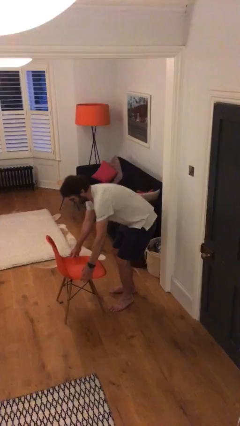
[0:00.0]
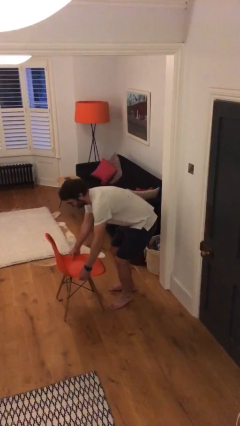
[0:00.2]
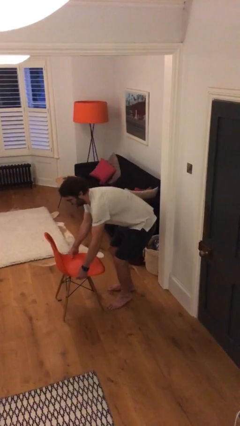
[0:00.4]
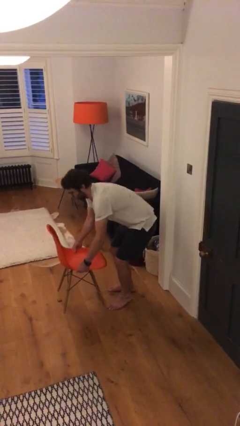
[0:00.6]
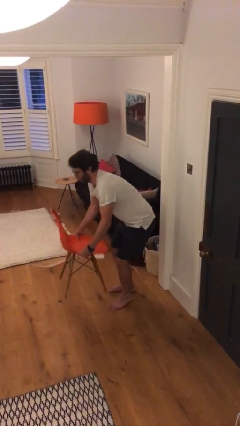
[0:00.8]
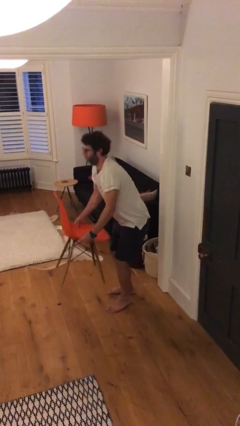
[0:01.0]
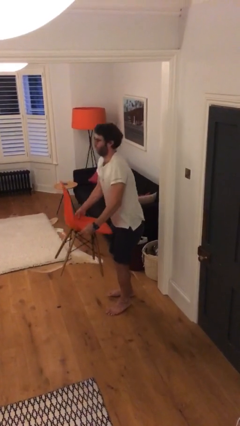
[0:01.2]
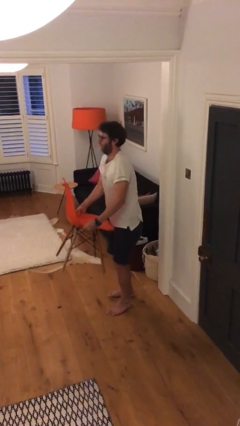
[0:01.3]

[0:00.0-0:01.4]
person picks up object from floor

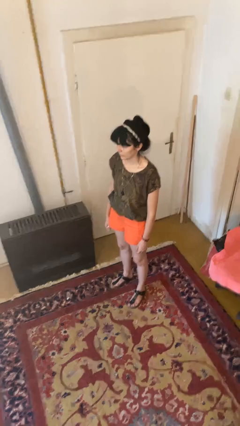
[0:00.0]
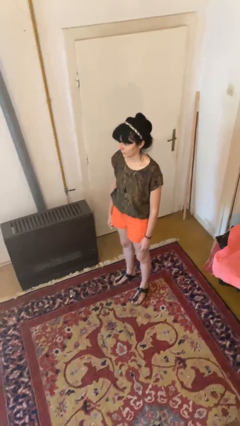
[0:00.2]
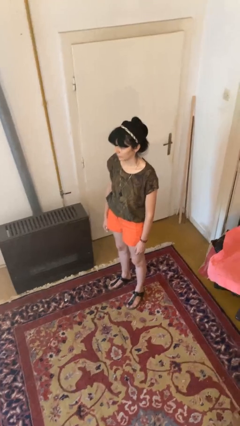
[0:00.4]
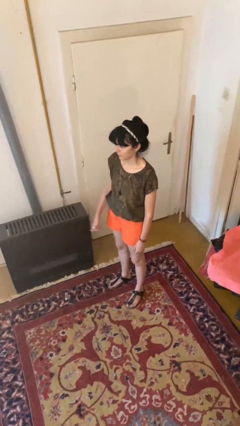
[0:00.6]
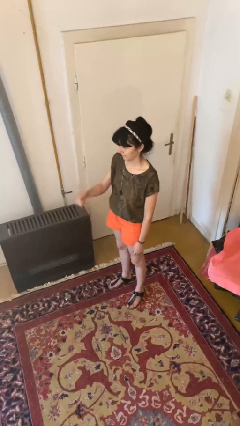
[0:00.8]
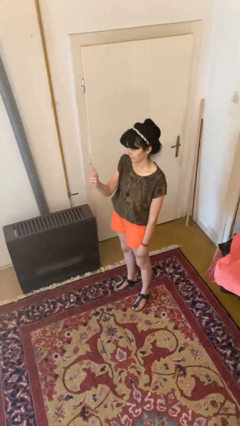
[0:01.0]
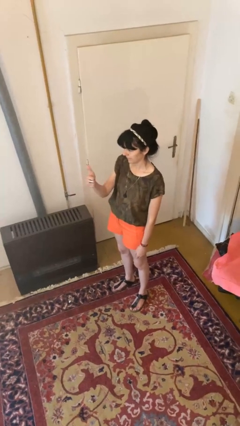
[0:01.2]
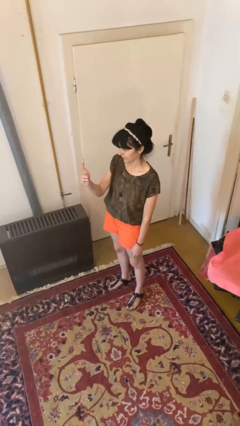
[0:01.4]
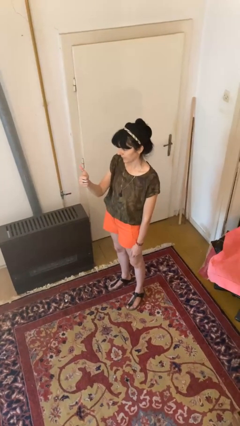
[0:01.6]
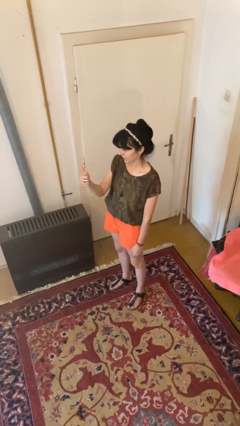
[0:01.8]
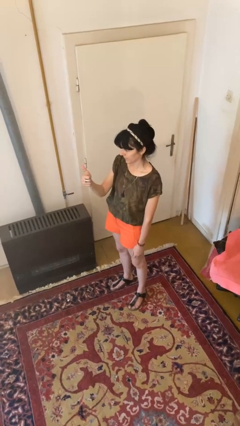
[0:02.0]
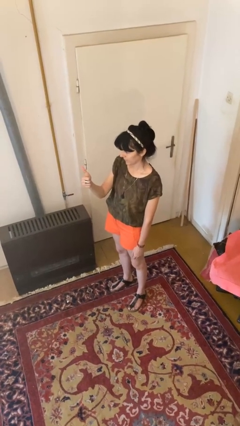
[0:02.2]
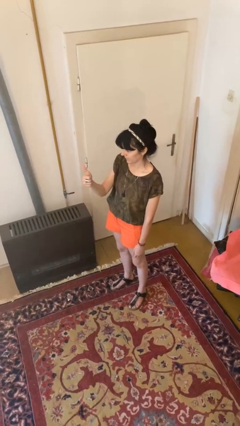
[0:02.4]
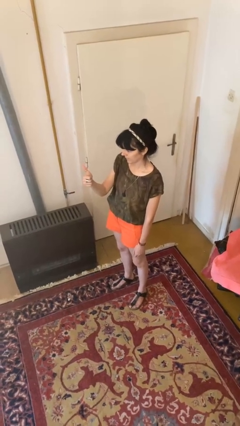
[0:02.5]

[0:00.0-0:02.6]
person gestures thumbs up

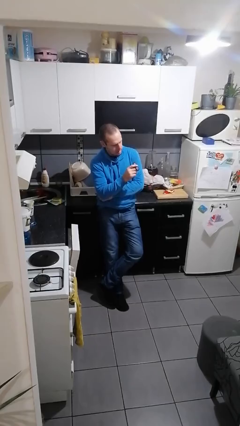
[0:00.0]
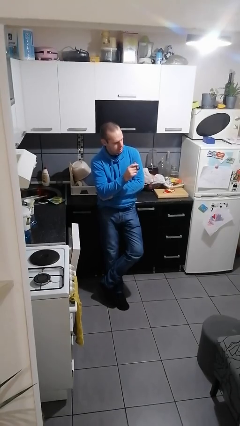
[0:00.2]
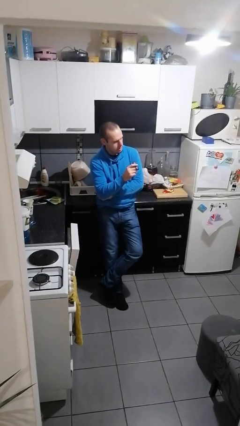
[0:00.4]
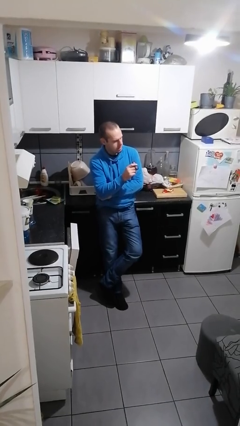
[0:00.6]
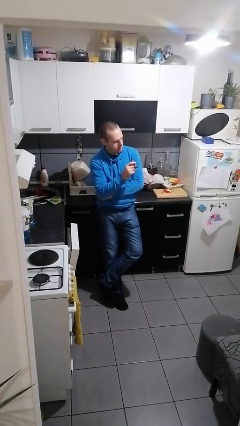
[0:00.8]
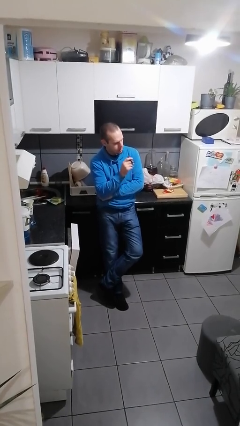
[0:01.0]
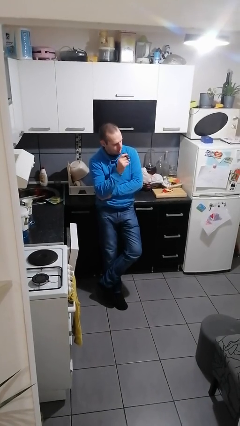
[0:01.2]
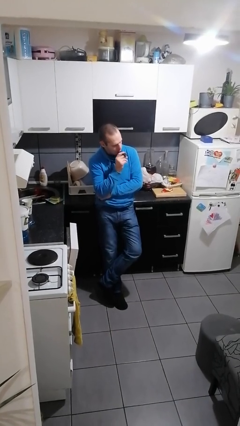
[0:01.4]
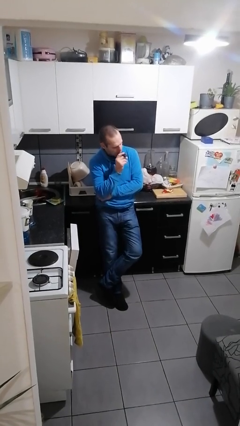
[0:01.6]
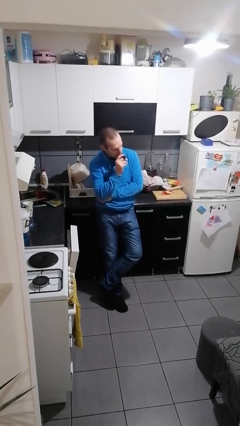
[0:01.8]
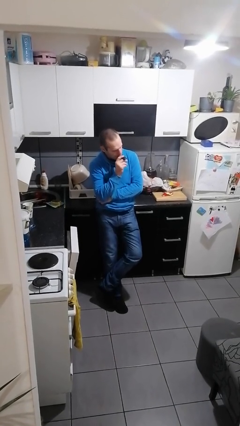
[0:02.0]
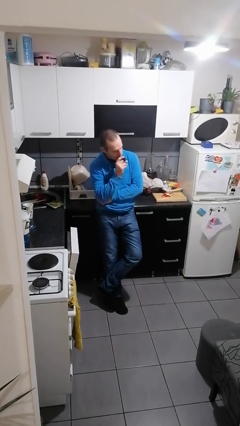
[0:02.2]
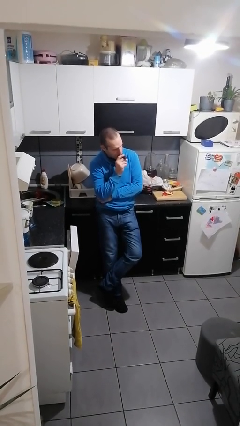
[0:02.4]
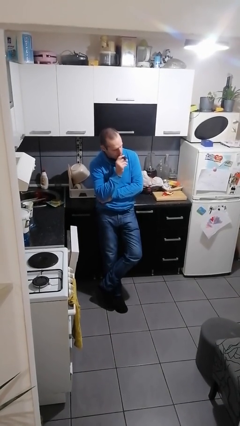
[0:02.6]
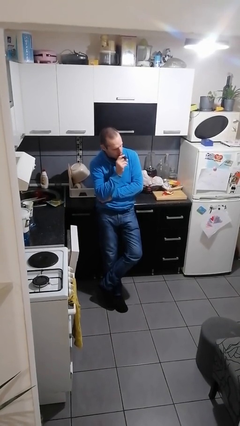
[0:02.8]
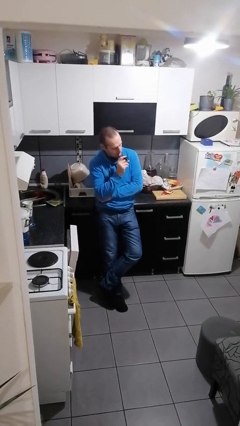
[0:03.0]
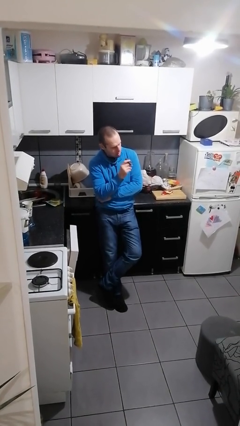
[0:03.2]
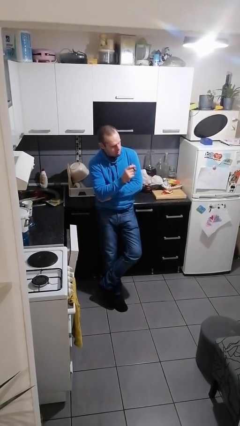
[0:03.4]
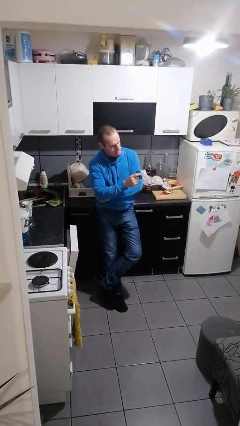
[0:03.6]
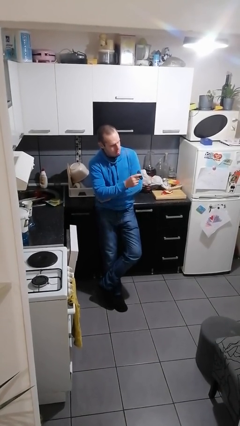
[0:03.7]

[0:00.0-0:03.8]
person vapes

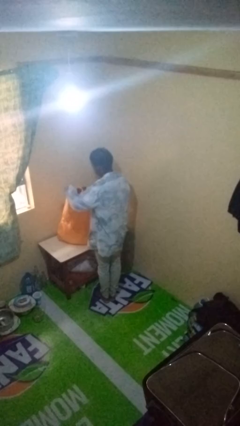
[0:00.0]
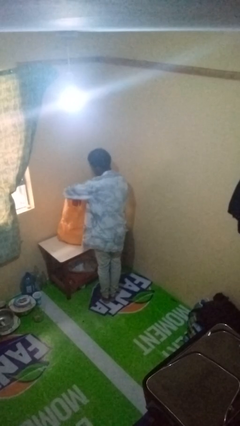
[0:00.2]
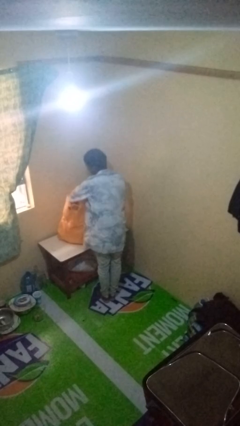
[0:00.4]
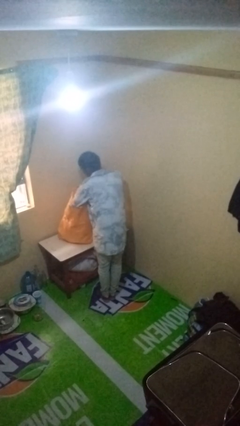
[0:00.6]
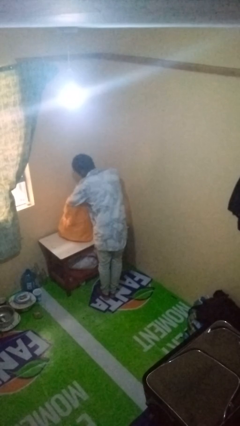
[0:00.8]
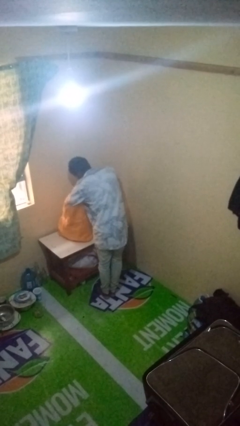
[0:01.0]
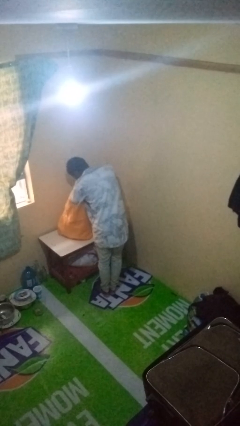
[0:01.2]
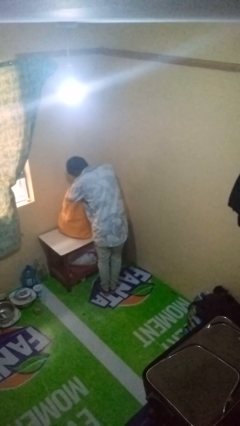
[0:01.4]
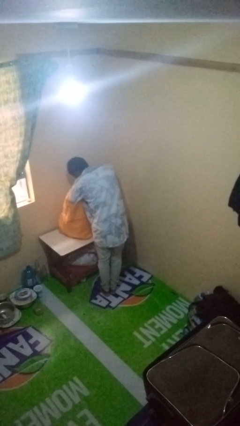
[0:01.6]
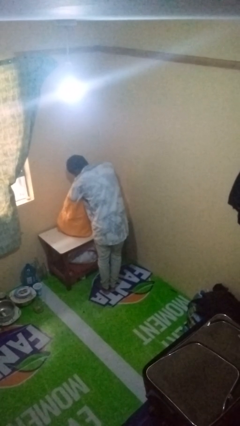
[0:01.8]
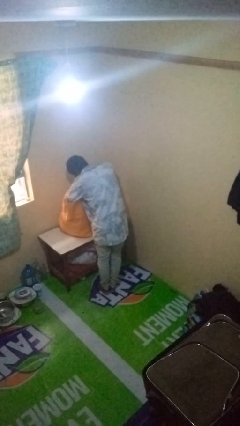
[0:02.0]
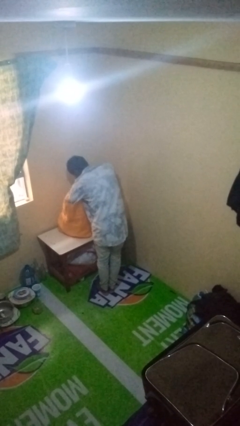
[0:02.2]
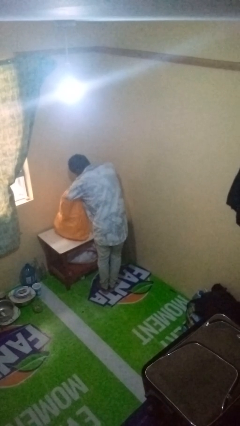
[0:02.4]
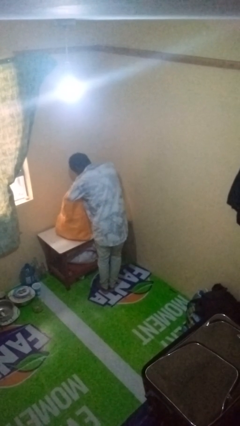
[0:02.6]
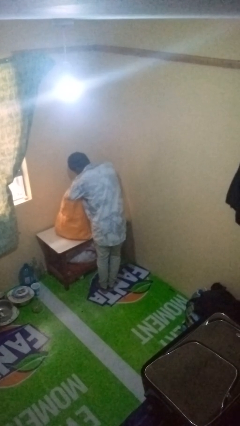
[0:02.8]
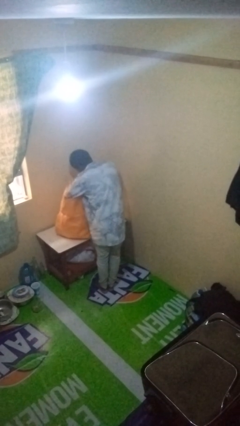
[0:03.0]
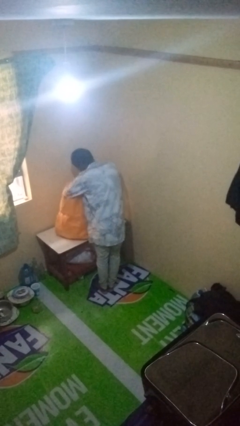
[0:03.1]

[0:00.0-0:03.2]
person searches in bag

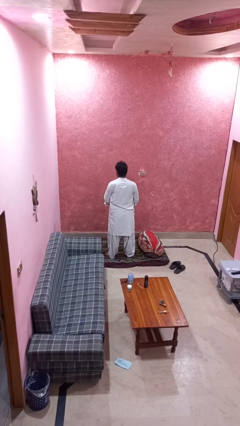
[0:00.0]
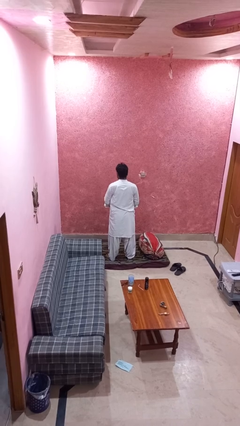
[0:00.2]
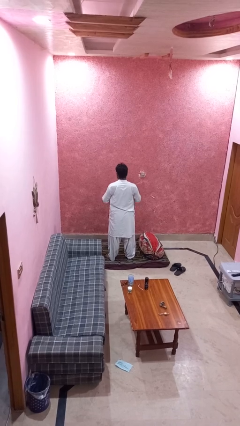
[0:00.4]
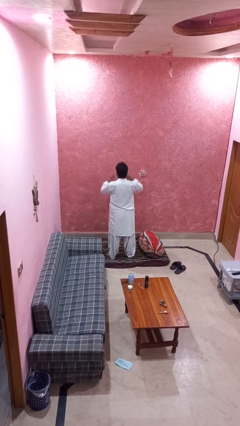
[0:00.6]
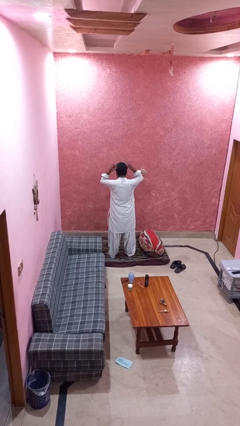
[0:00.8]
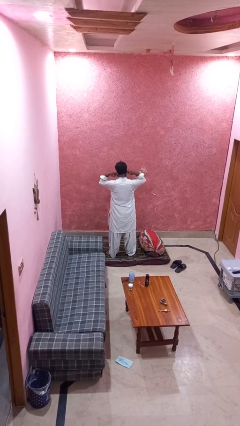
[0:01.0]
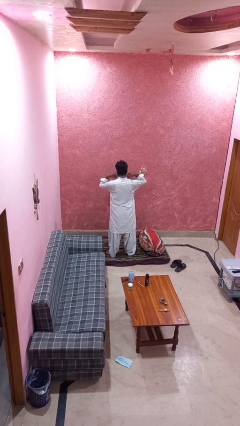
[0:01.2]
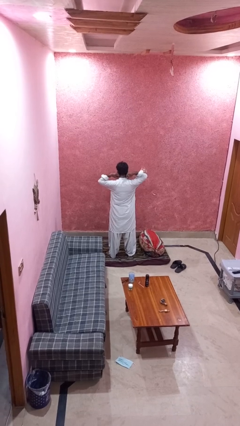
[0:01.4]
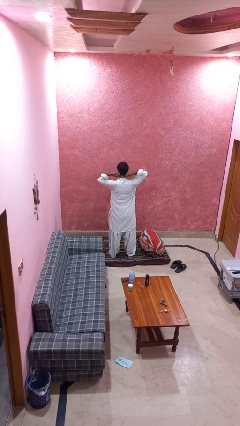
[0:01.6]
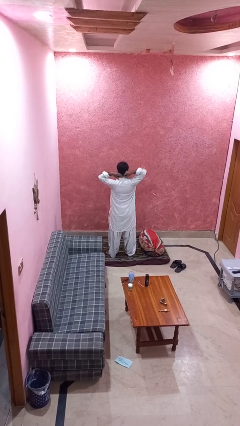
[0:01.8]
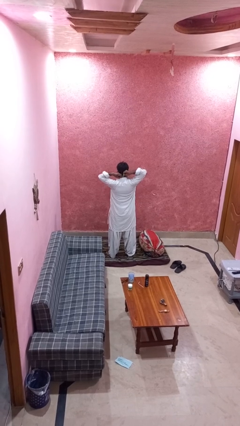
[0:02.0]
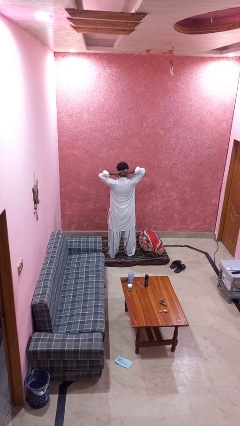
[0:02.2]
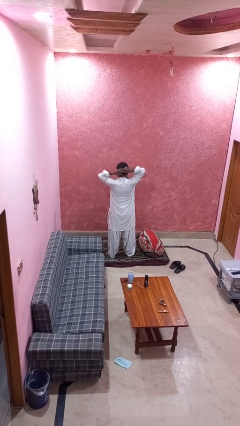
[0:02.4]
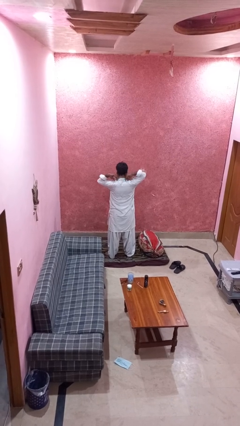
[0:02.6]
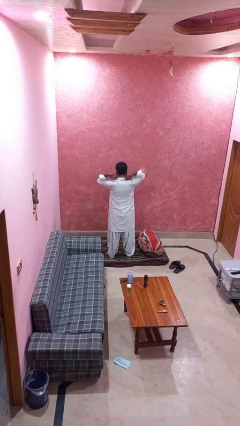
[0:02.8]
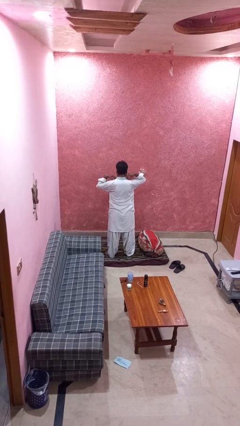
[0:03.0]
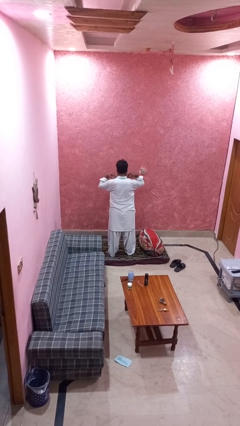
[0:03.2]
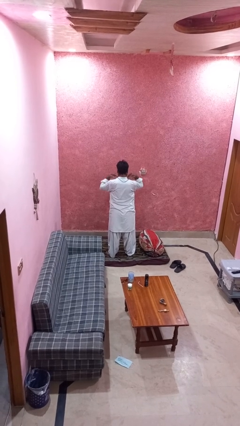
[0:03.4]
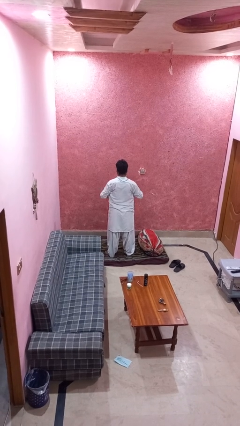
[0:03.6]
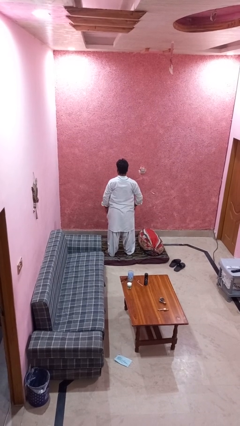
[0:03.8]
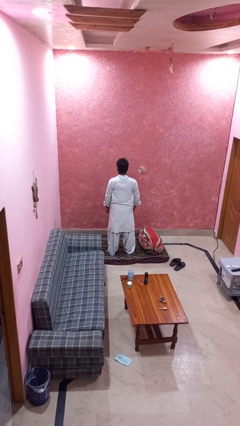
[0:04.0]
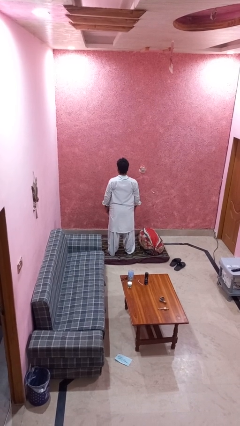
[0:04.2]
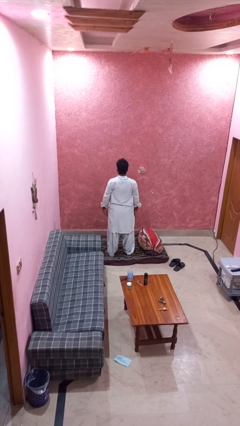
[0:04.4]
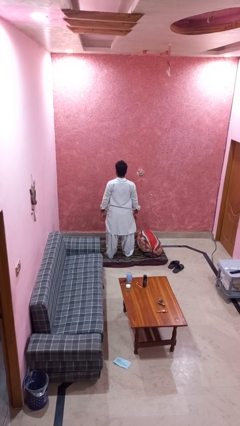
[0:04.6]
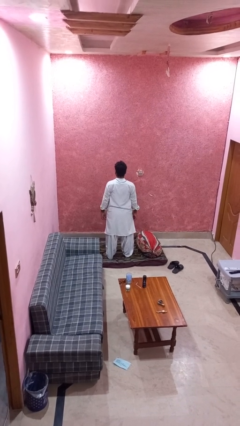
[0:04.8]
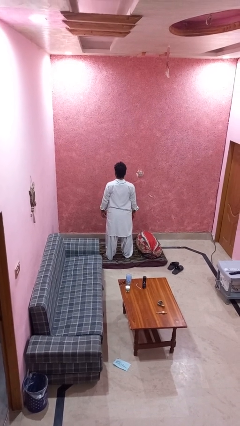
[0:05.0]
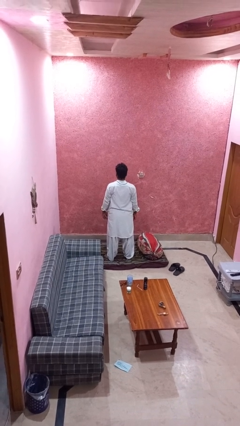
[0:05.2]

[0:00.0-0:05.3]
person puts on necklace

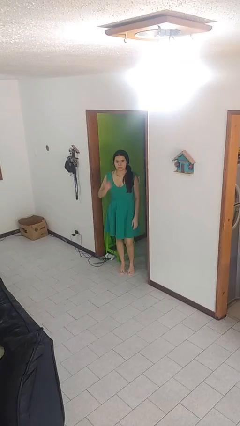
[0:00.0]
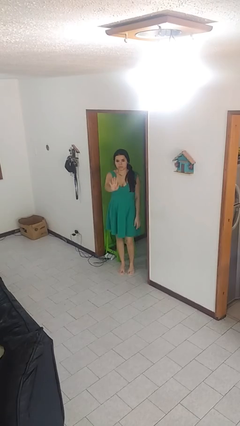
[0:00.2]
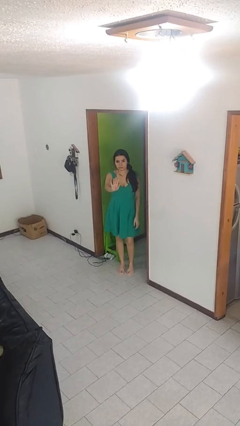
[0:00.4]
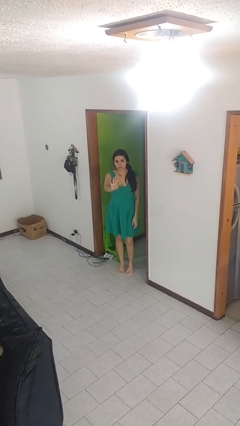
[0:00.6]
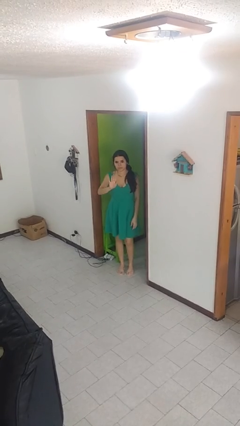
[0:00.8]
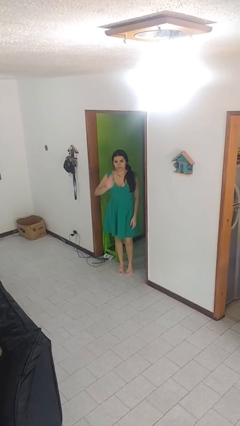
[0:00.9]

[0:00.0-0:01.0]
person gestures stop

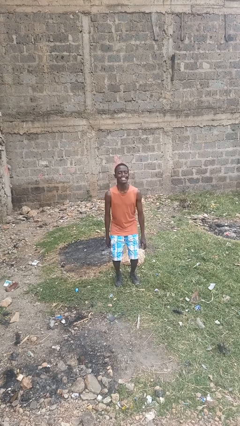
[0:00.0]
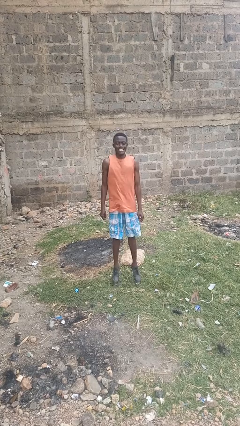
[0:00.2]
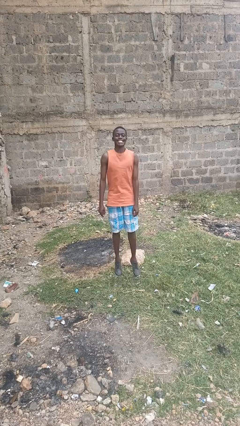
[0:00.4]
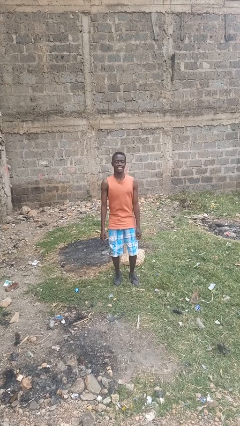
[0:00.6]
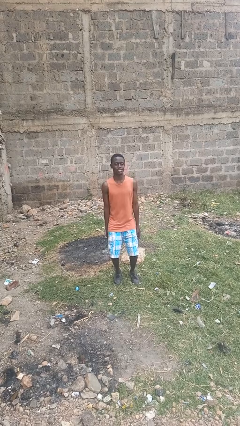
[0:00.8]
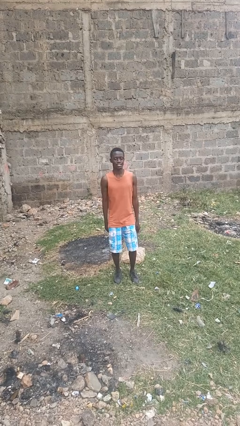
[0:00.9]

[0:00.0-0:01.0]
person jumps
